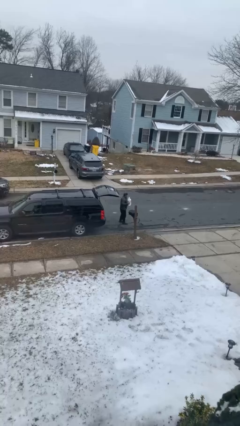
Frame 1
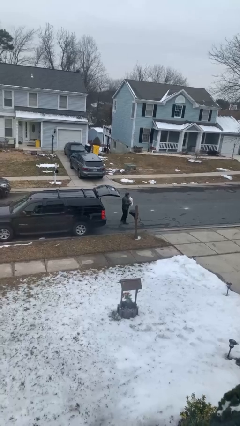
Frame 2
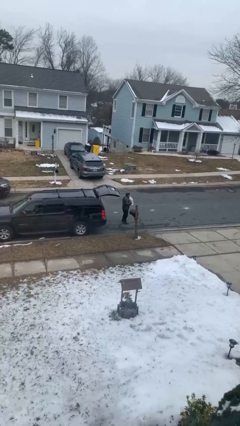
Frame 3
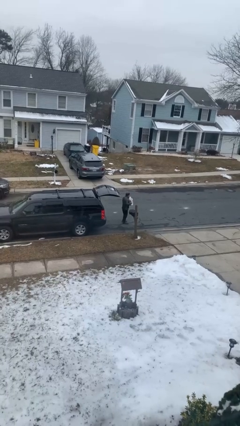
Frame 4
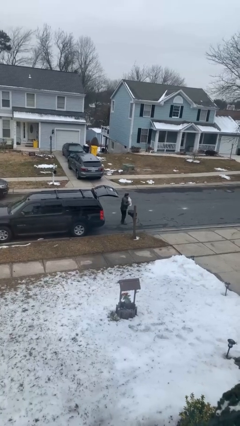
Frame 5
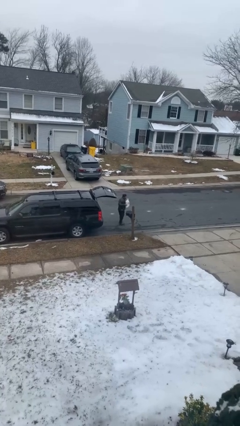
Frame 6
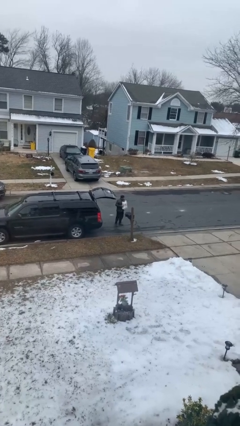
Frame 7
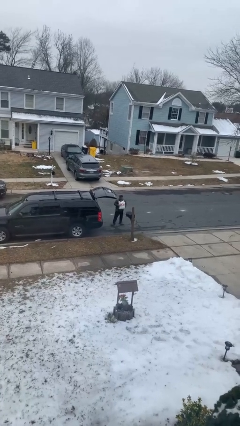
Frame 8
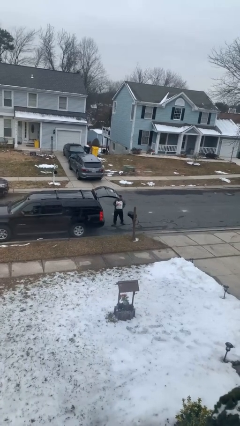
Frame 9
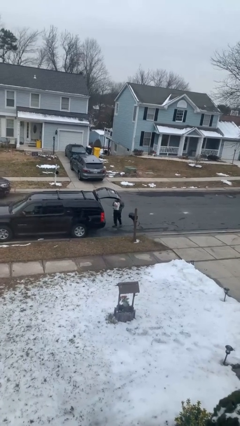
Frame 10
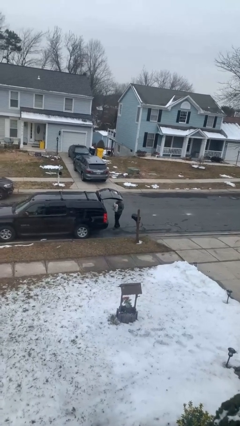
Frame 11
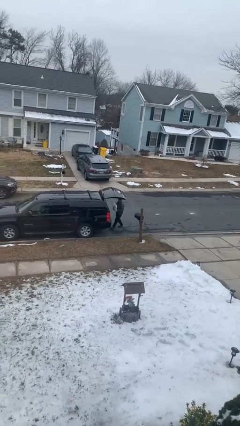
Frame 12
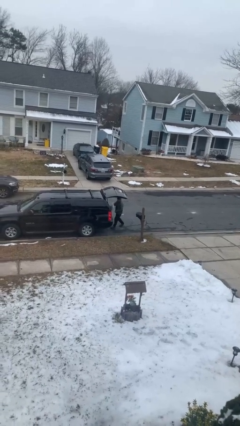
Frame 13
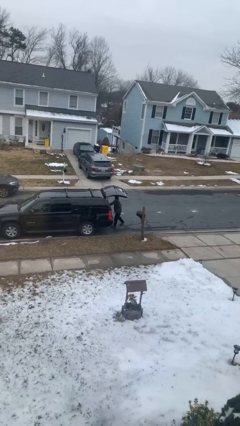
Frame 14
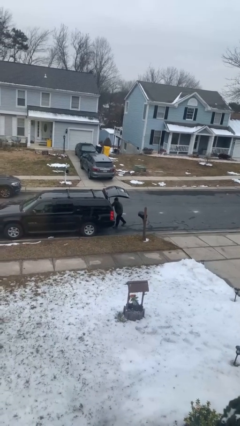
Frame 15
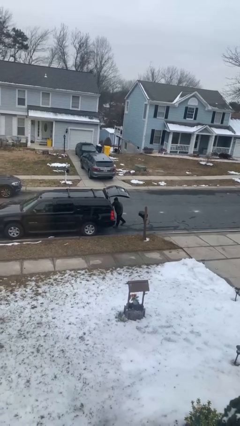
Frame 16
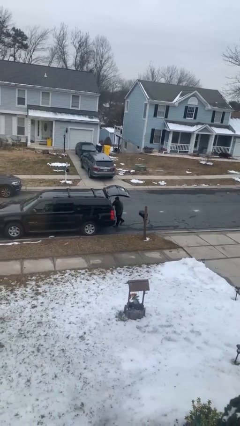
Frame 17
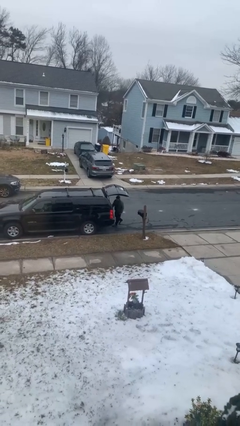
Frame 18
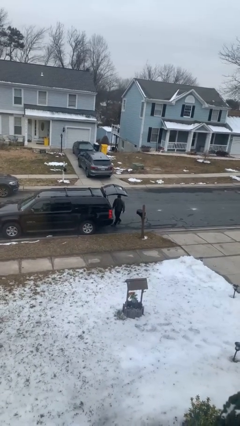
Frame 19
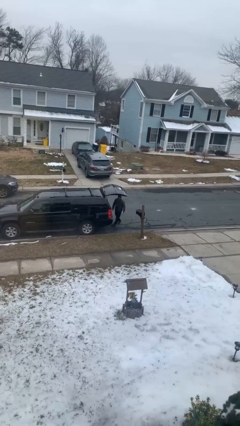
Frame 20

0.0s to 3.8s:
person loads car

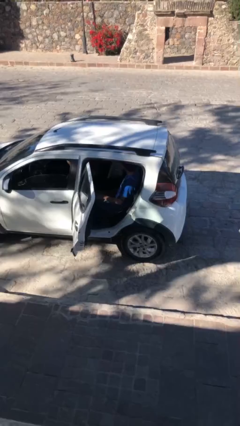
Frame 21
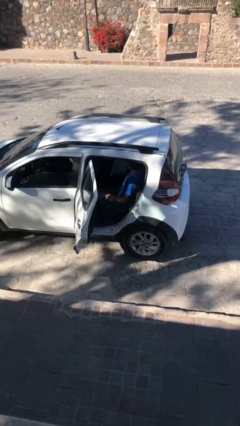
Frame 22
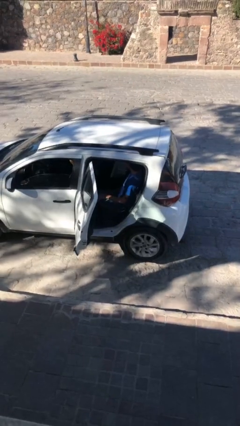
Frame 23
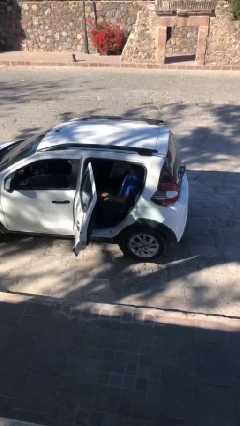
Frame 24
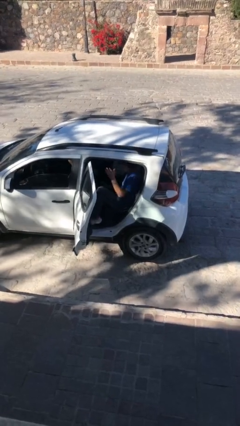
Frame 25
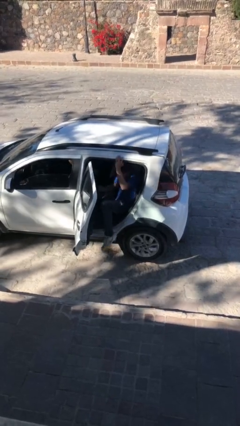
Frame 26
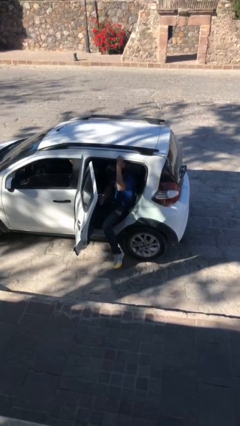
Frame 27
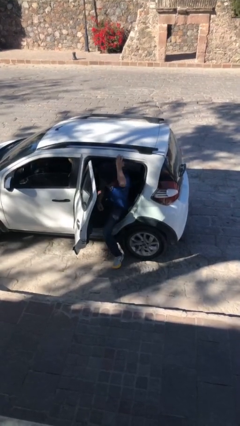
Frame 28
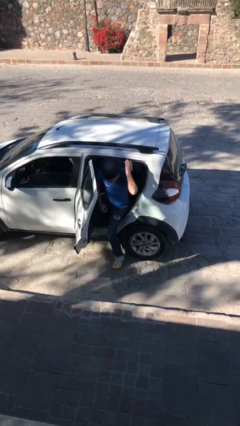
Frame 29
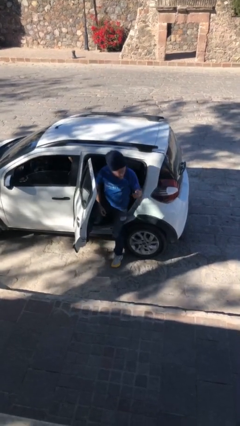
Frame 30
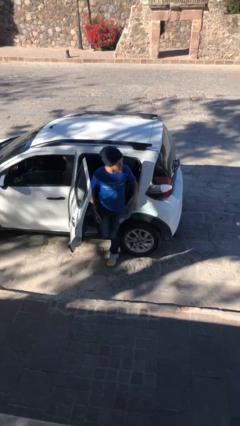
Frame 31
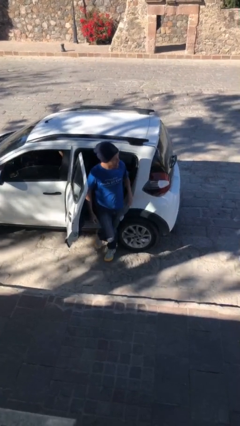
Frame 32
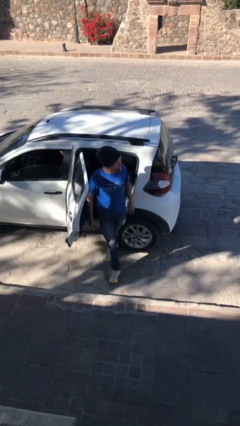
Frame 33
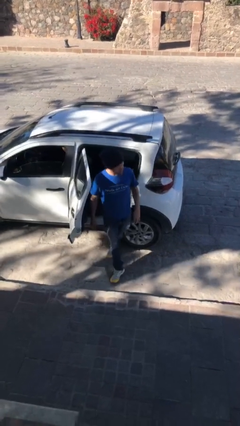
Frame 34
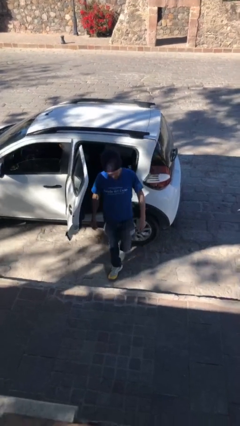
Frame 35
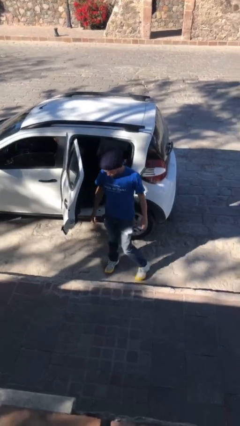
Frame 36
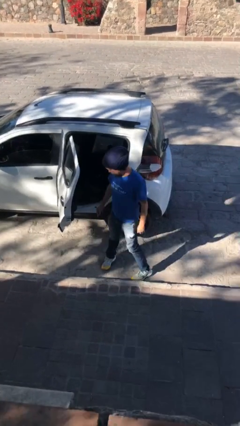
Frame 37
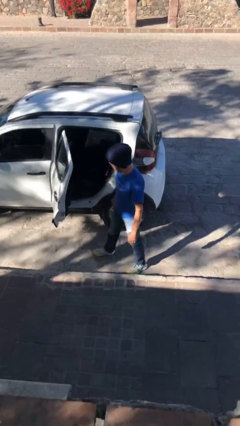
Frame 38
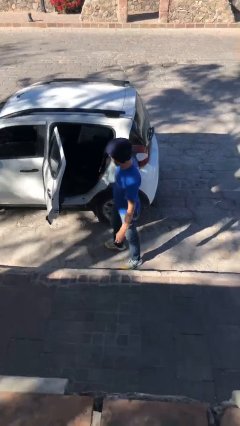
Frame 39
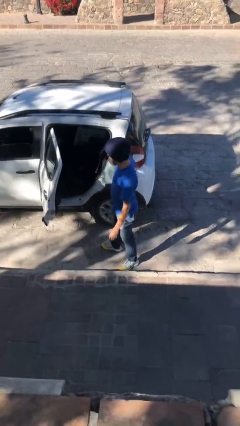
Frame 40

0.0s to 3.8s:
person exits car

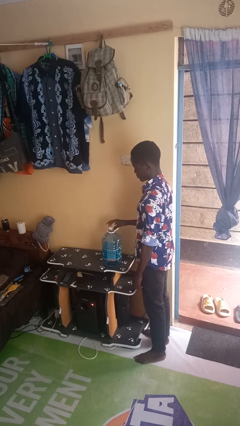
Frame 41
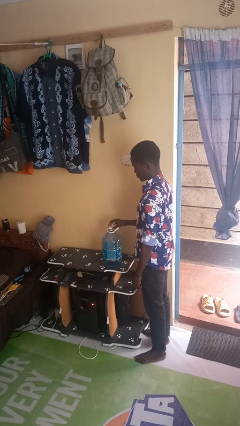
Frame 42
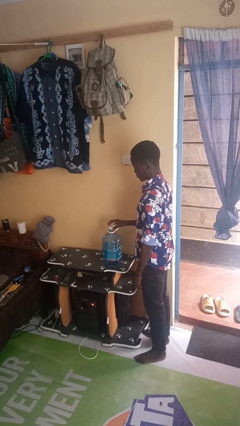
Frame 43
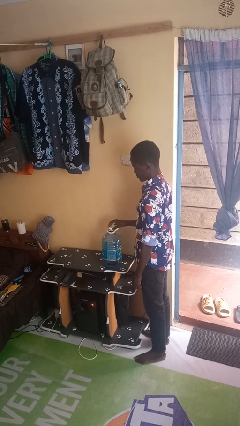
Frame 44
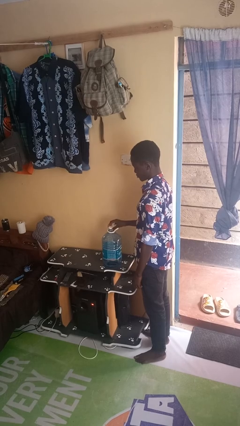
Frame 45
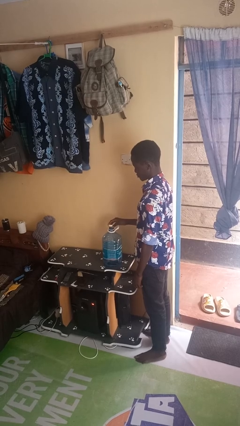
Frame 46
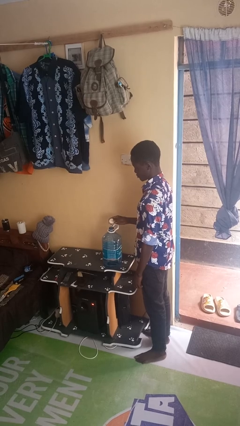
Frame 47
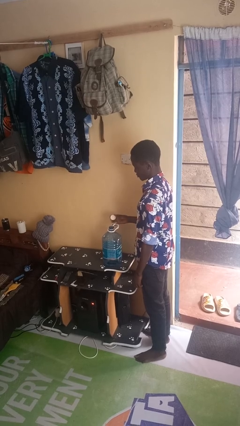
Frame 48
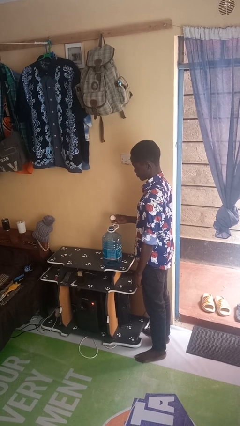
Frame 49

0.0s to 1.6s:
person unscrews lid from bottle

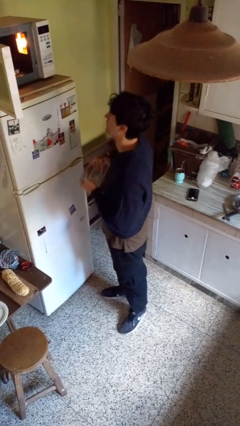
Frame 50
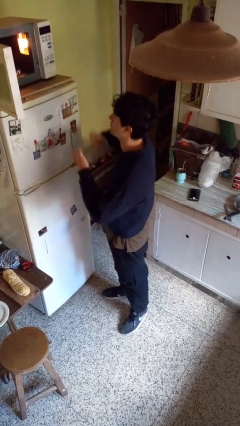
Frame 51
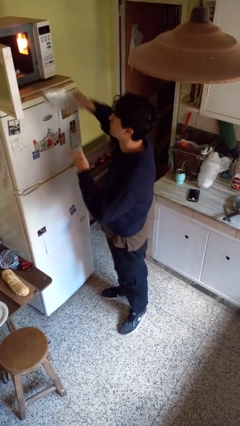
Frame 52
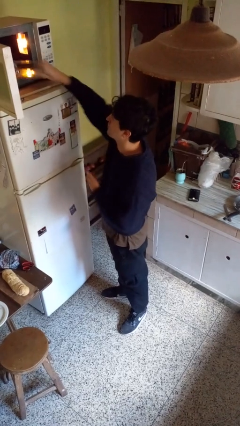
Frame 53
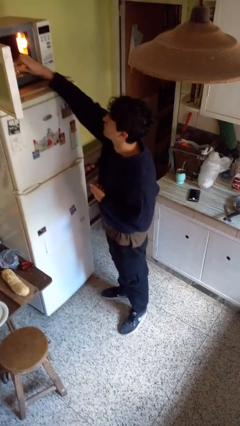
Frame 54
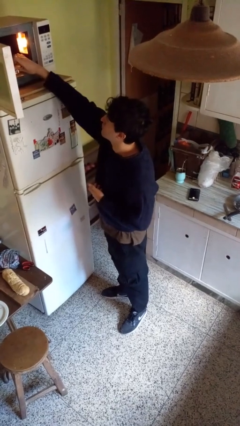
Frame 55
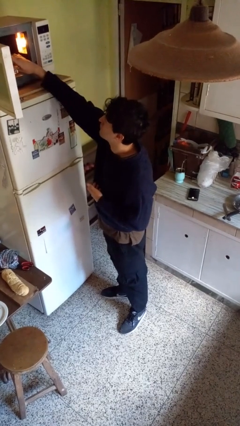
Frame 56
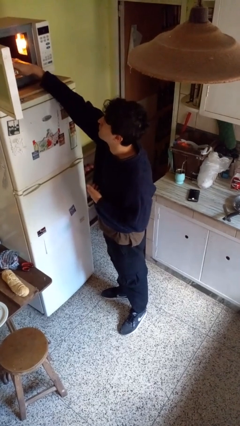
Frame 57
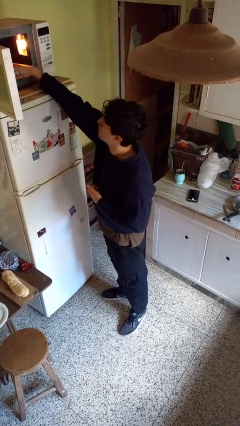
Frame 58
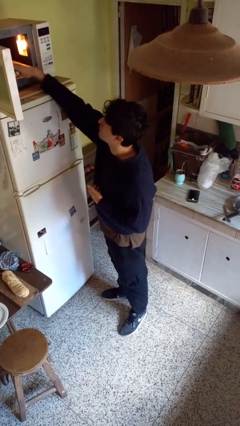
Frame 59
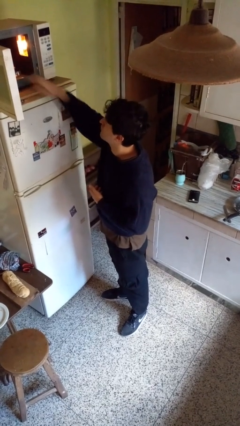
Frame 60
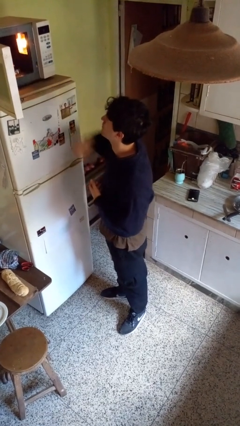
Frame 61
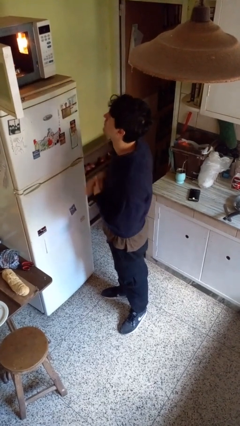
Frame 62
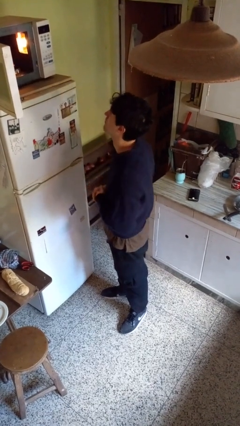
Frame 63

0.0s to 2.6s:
person puts object into microwave

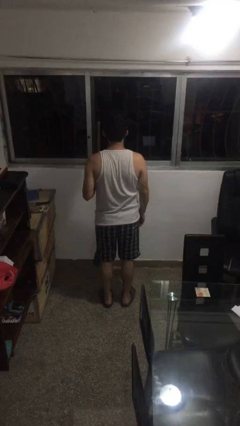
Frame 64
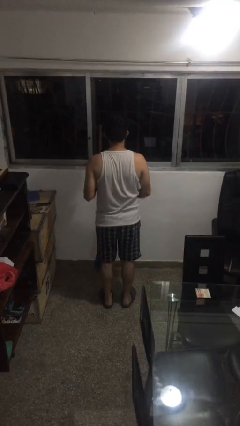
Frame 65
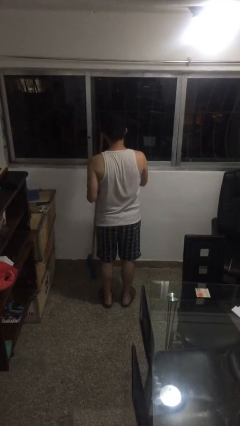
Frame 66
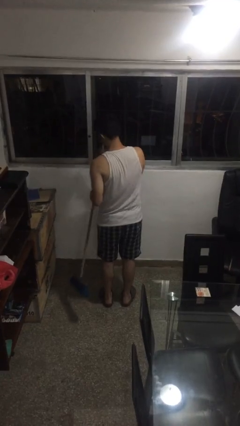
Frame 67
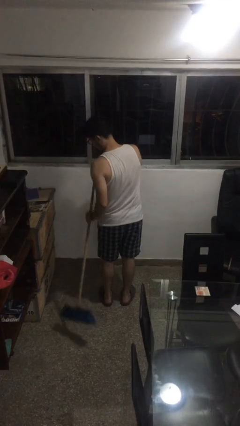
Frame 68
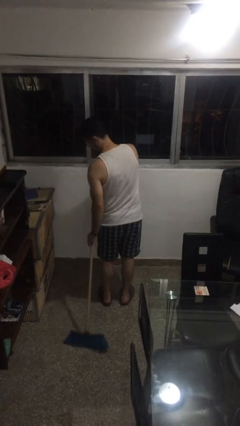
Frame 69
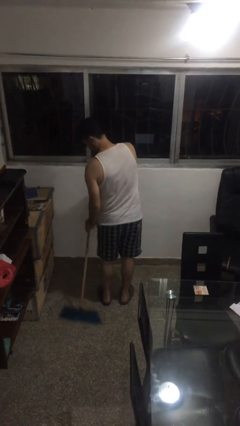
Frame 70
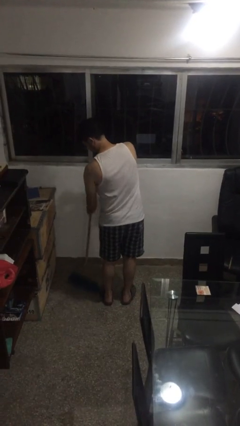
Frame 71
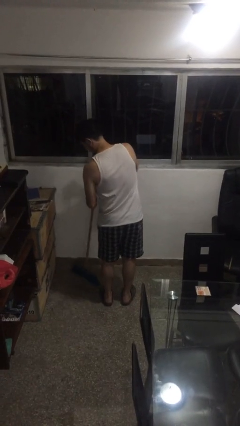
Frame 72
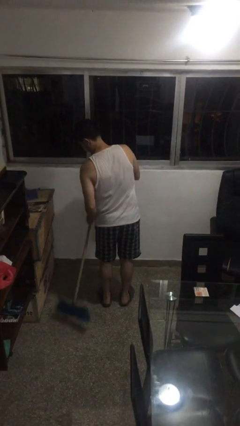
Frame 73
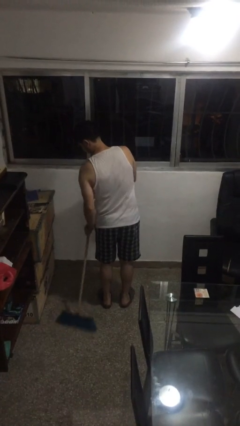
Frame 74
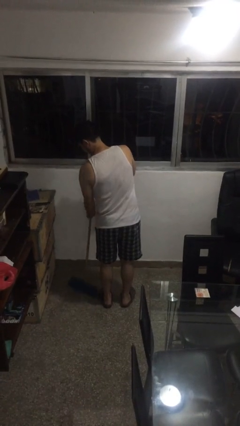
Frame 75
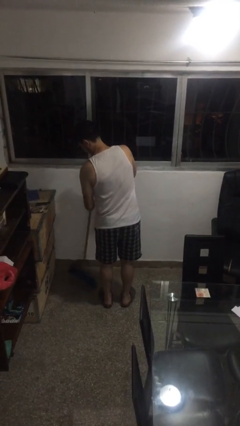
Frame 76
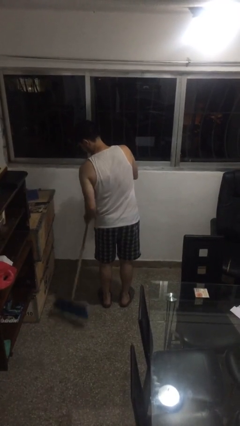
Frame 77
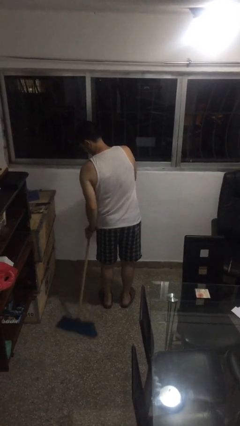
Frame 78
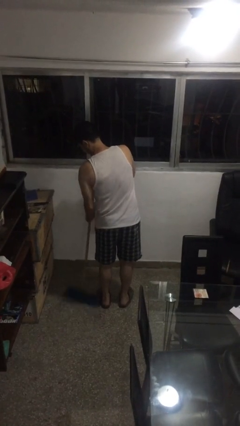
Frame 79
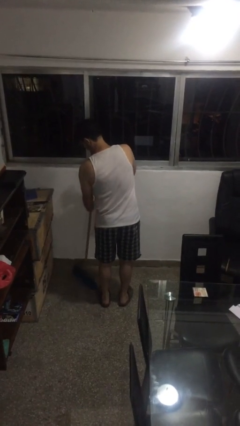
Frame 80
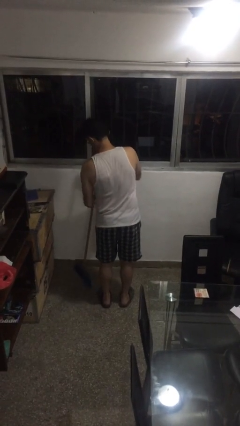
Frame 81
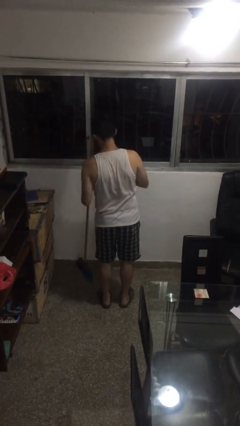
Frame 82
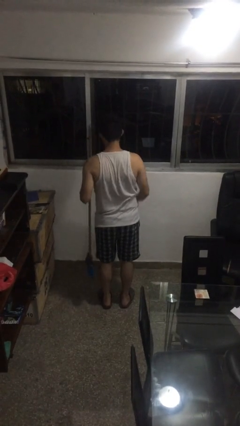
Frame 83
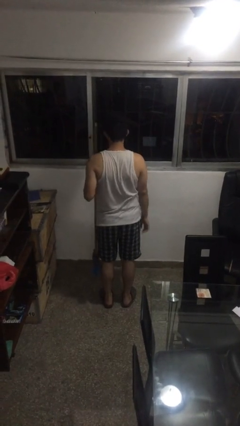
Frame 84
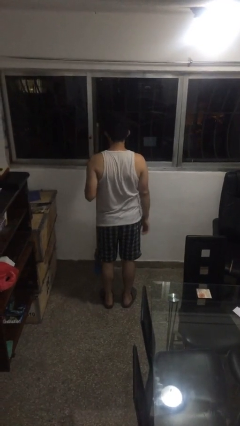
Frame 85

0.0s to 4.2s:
person sweeps floor

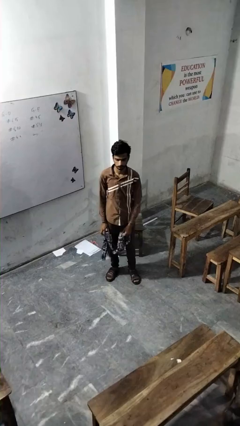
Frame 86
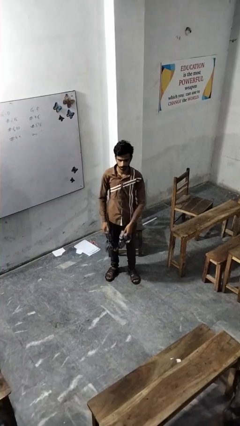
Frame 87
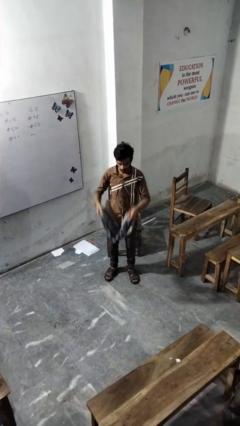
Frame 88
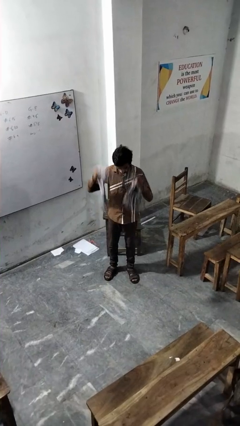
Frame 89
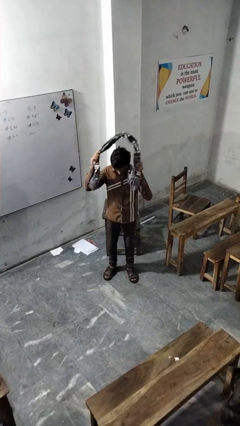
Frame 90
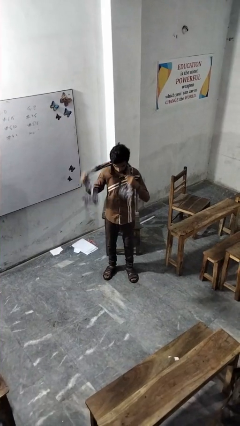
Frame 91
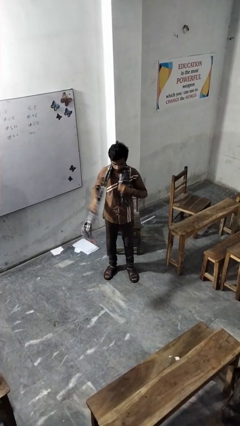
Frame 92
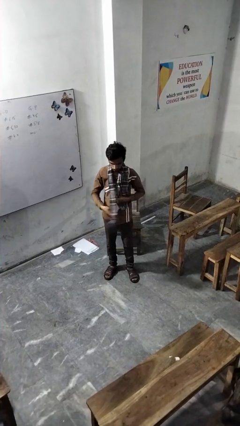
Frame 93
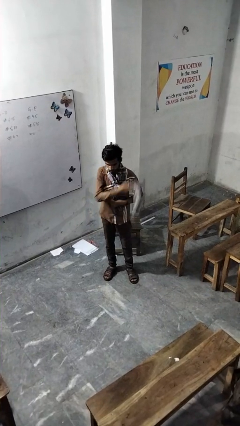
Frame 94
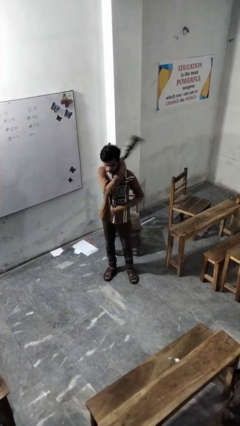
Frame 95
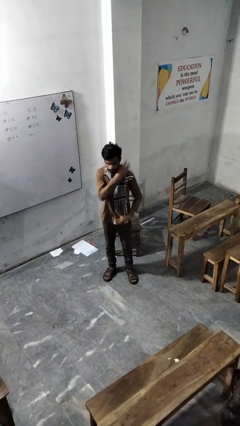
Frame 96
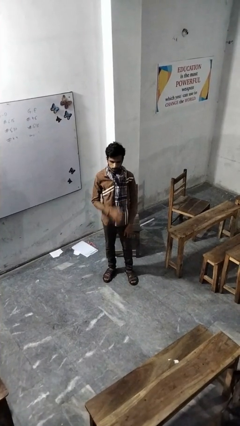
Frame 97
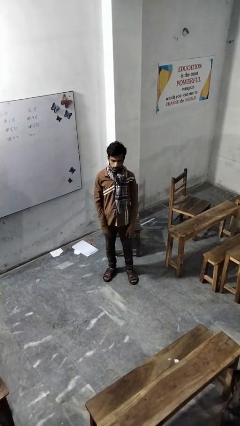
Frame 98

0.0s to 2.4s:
person puts on scarf
